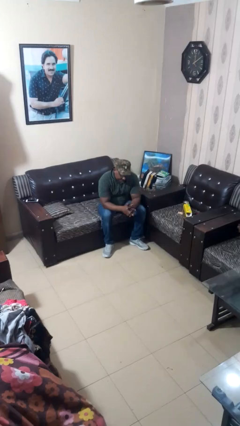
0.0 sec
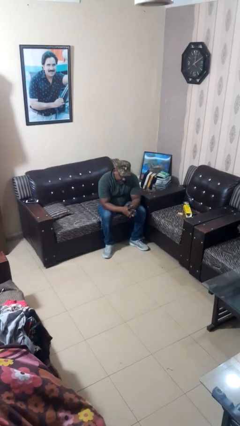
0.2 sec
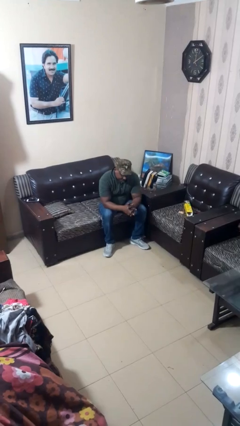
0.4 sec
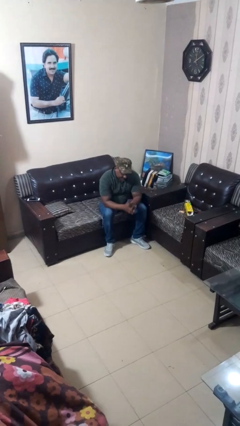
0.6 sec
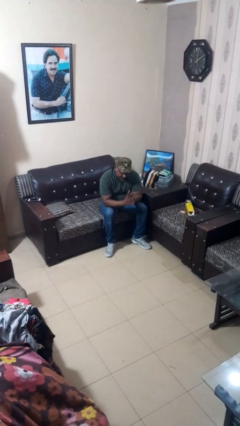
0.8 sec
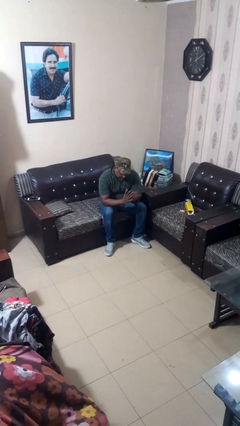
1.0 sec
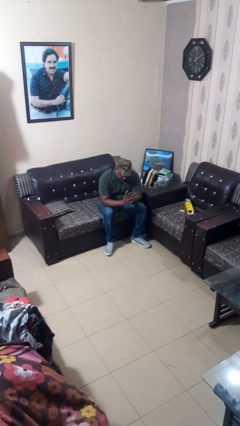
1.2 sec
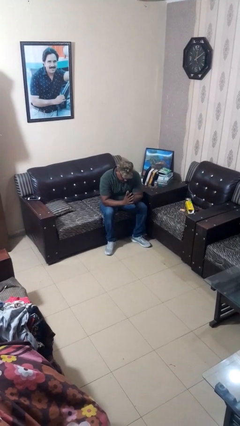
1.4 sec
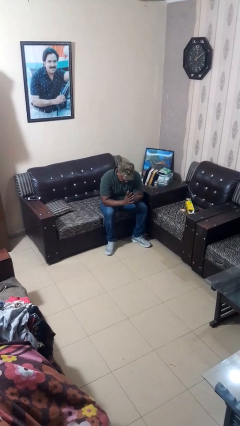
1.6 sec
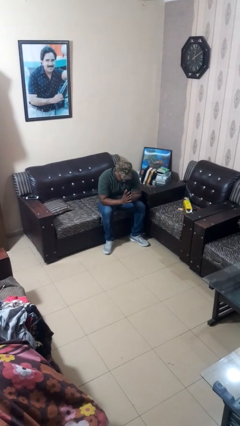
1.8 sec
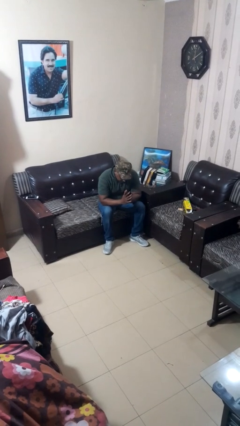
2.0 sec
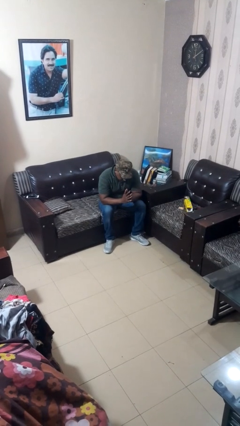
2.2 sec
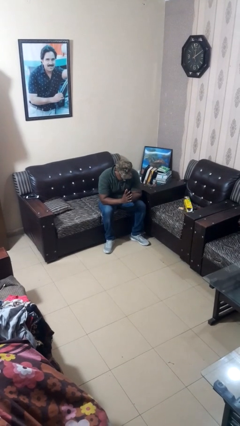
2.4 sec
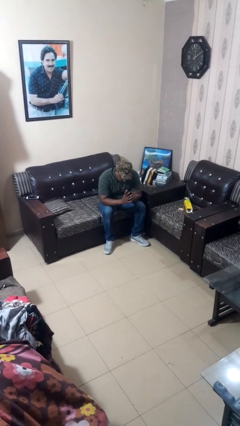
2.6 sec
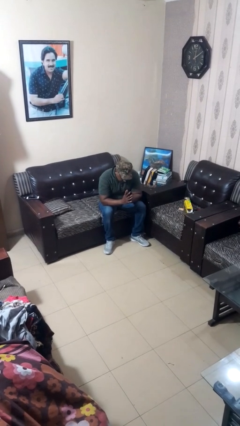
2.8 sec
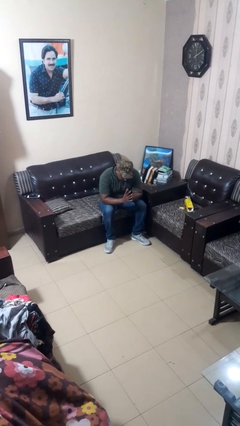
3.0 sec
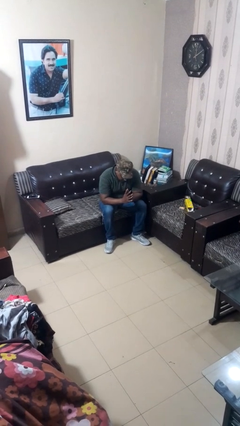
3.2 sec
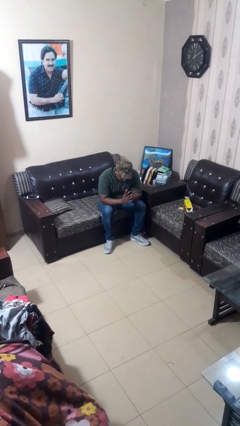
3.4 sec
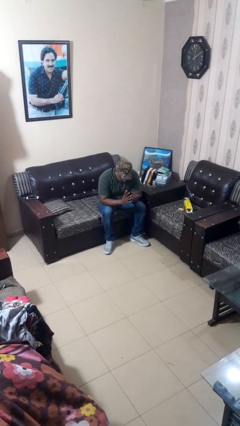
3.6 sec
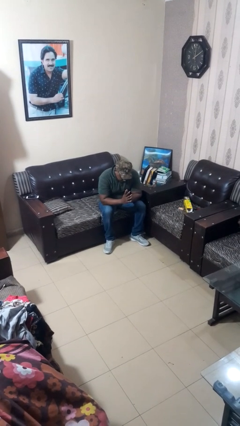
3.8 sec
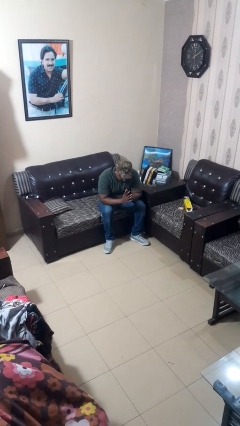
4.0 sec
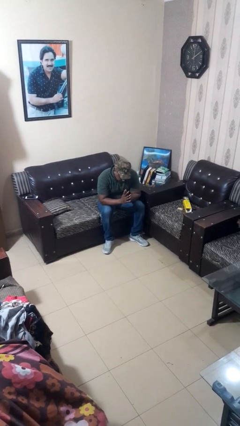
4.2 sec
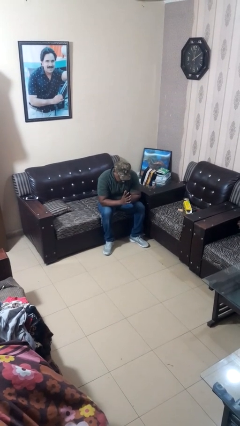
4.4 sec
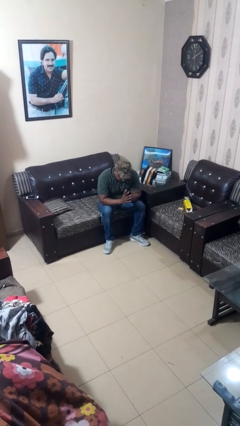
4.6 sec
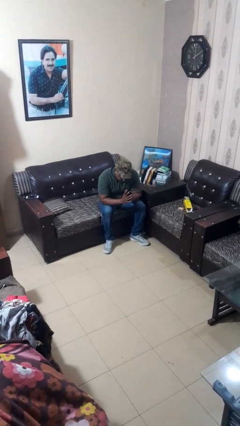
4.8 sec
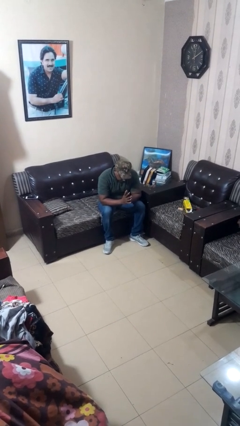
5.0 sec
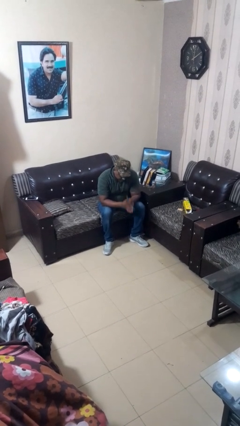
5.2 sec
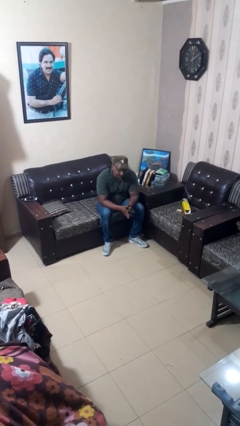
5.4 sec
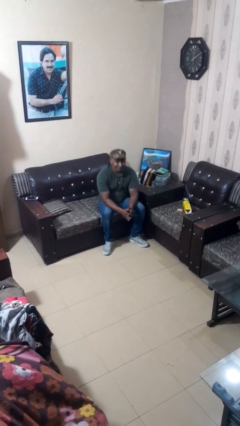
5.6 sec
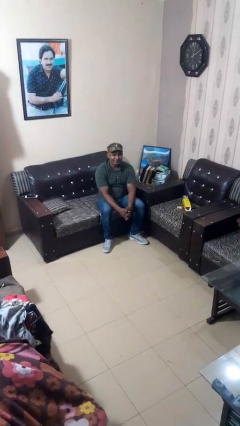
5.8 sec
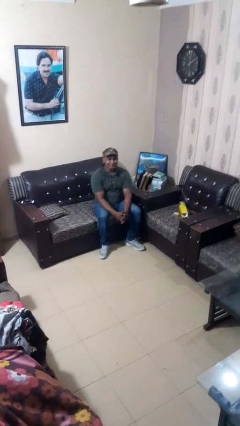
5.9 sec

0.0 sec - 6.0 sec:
person prays

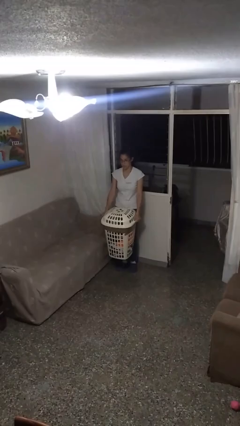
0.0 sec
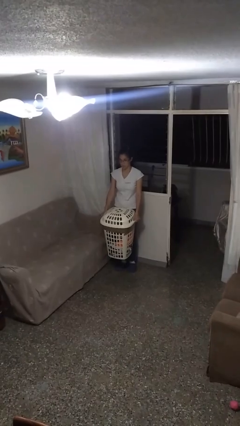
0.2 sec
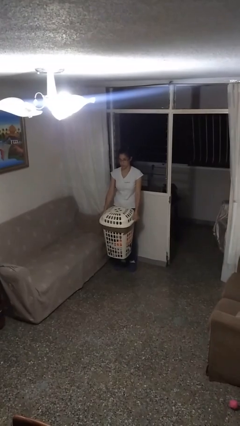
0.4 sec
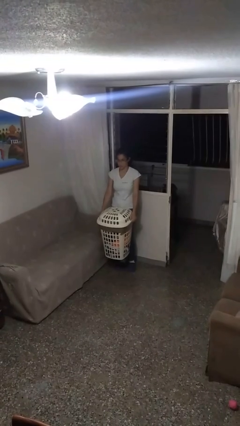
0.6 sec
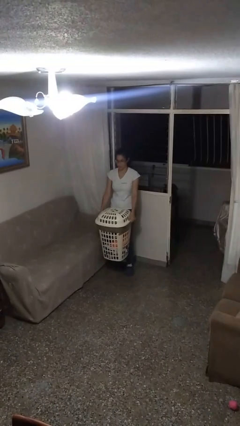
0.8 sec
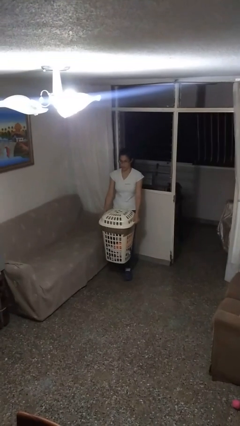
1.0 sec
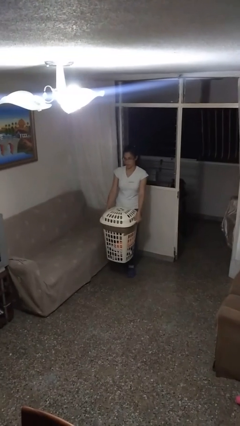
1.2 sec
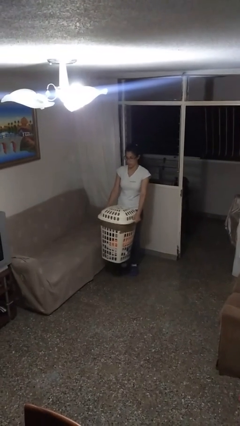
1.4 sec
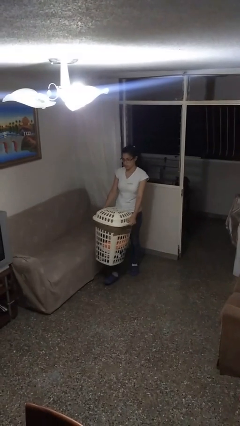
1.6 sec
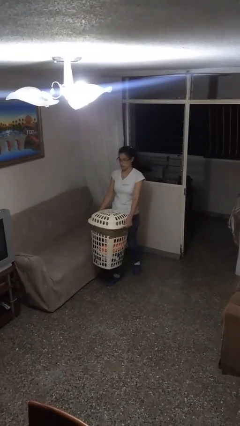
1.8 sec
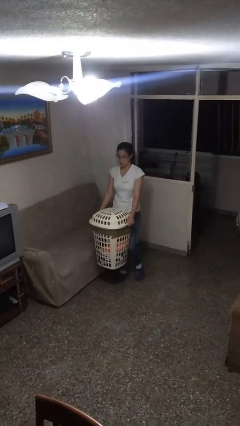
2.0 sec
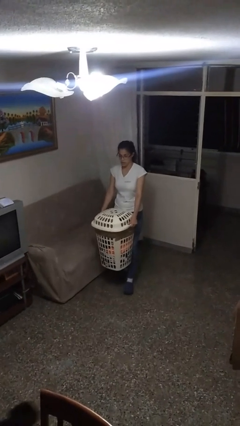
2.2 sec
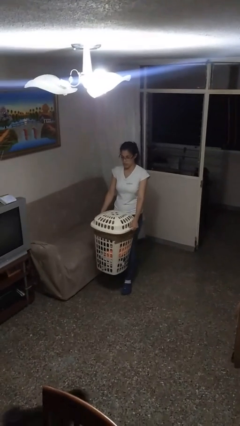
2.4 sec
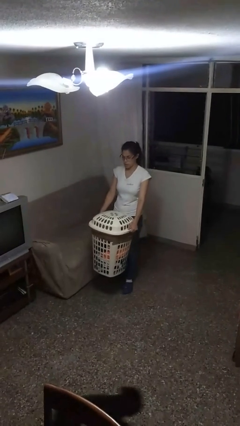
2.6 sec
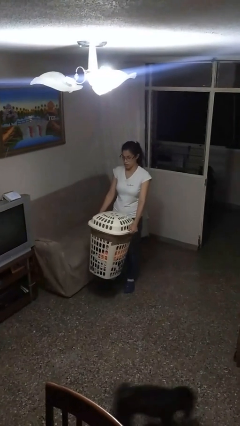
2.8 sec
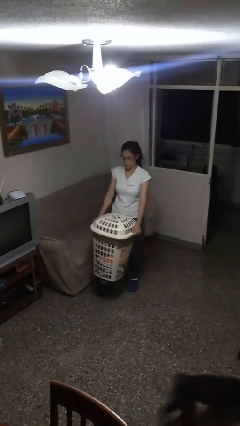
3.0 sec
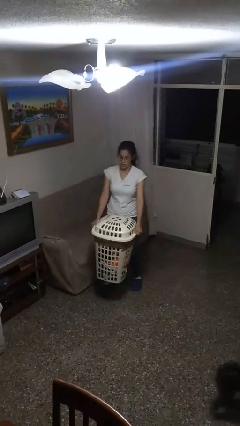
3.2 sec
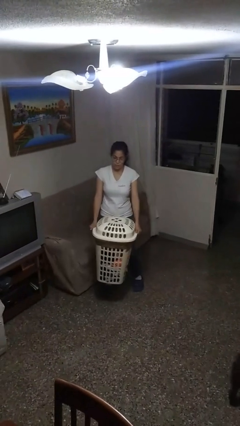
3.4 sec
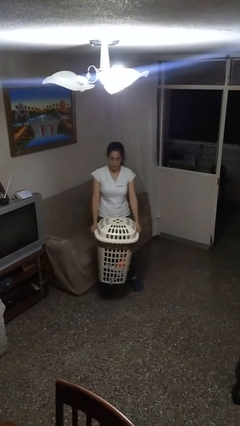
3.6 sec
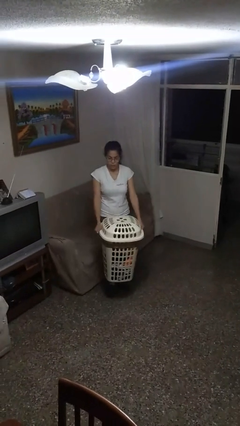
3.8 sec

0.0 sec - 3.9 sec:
person carries laundry basket

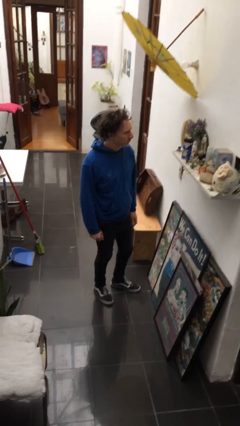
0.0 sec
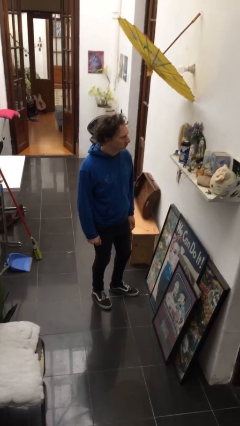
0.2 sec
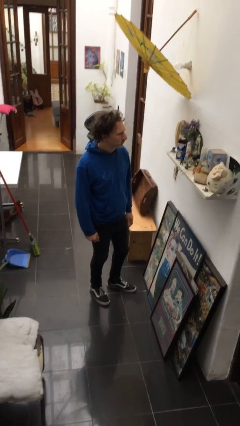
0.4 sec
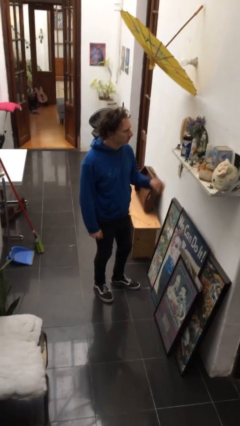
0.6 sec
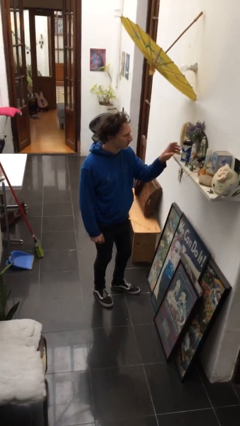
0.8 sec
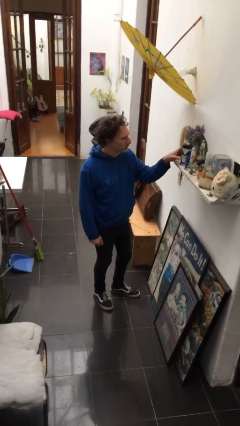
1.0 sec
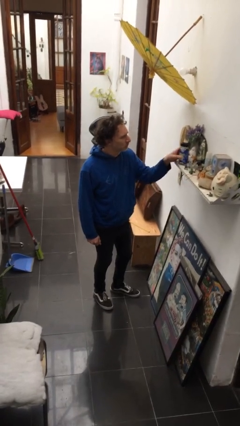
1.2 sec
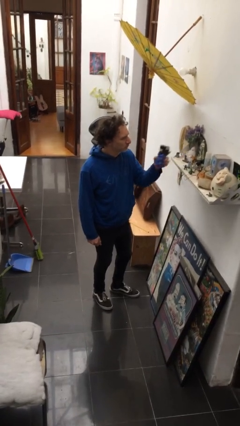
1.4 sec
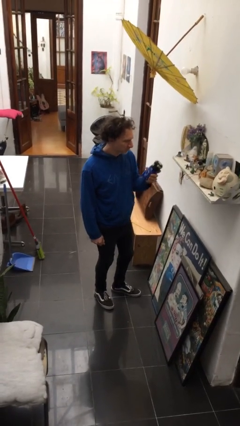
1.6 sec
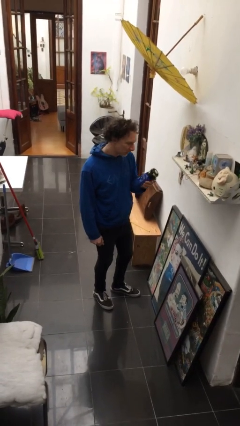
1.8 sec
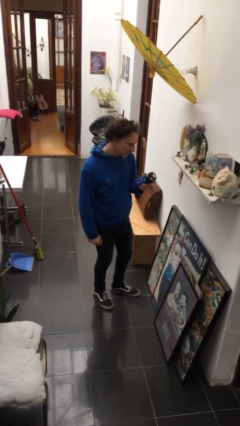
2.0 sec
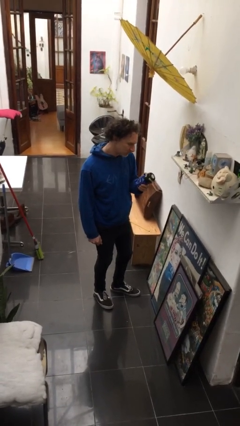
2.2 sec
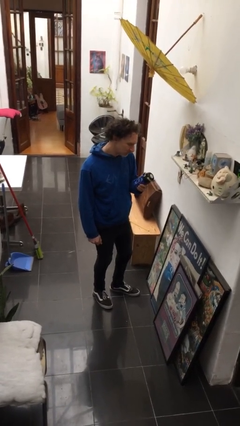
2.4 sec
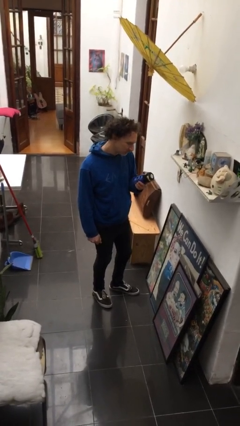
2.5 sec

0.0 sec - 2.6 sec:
person picks up object from shelf

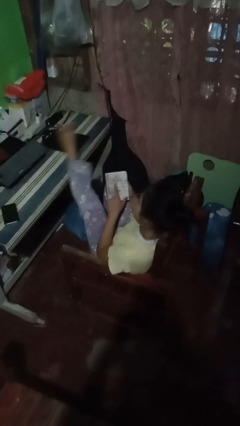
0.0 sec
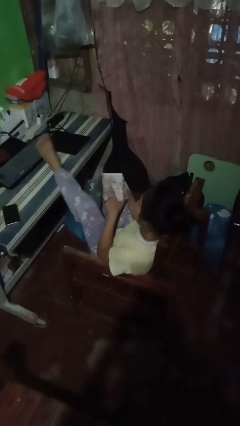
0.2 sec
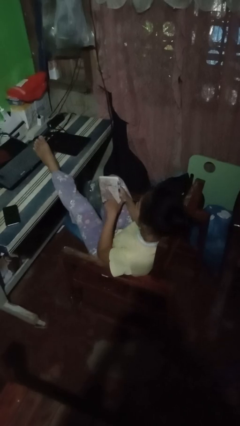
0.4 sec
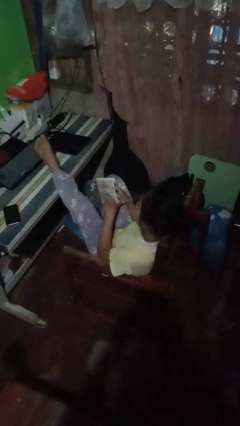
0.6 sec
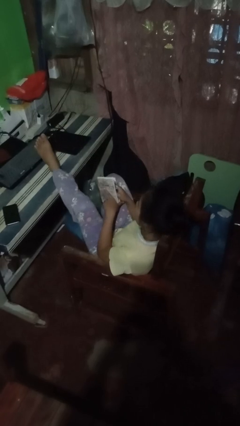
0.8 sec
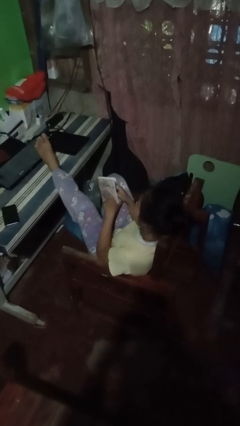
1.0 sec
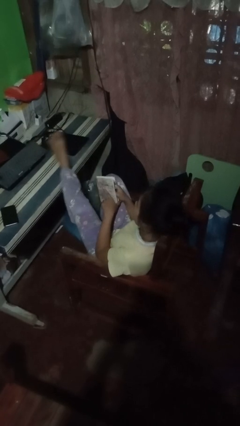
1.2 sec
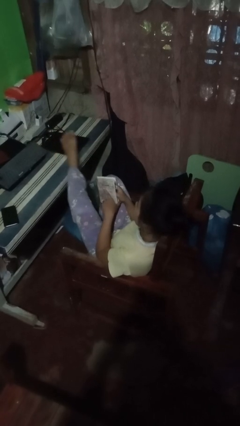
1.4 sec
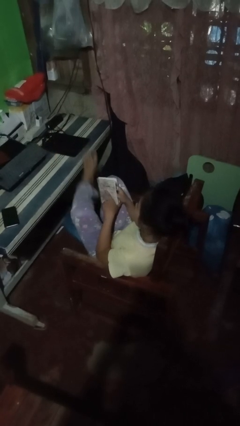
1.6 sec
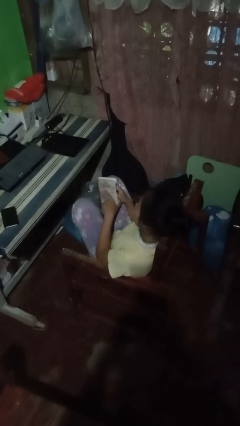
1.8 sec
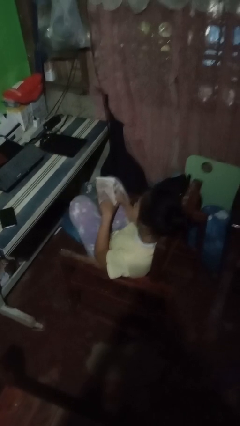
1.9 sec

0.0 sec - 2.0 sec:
person puts feet up

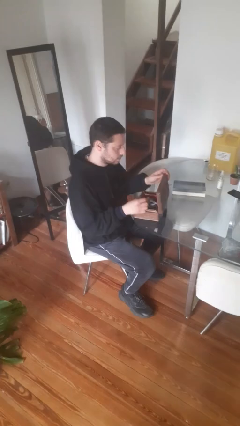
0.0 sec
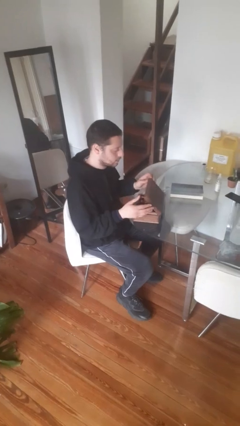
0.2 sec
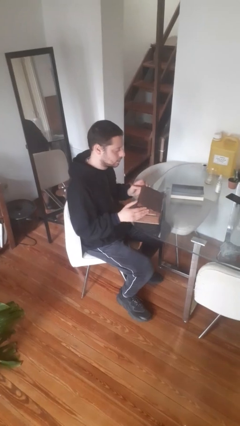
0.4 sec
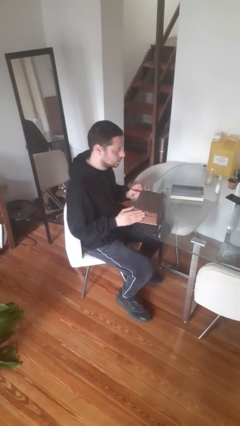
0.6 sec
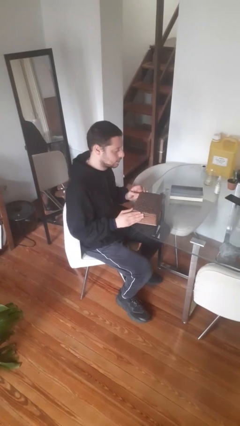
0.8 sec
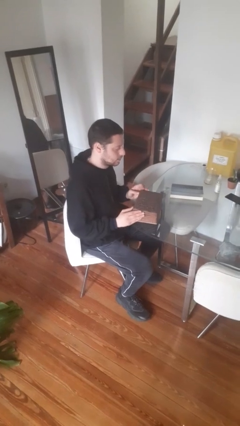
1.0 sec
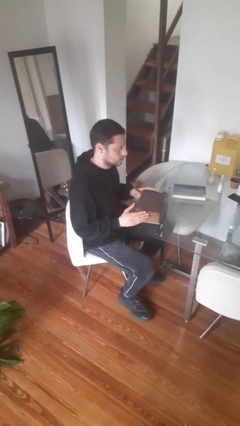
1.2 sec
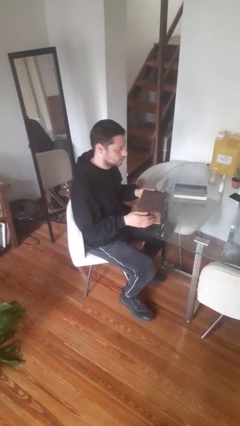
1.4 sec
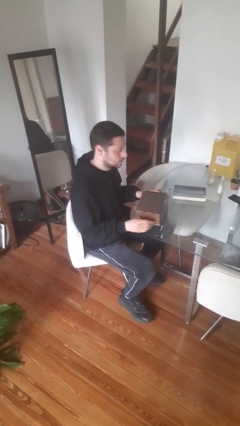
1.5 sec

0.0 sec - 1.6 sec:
person closes jewelry box

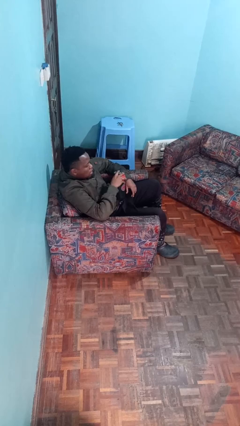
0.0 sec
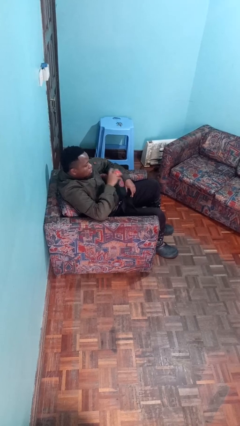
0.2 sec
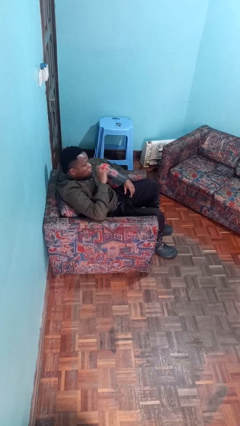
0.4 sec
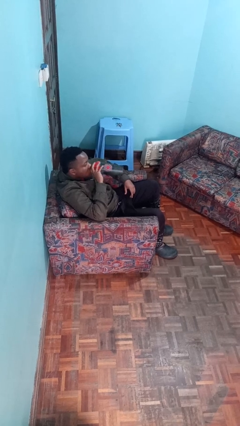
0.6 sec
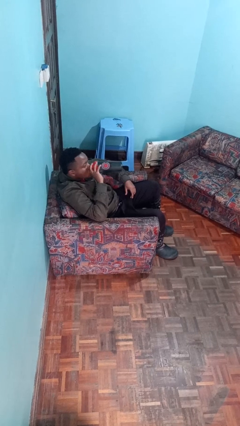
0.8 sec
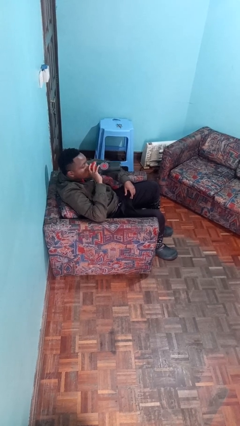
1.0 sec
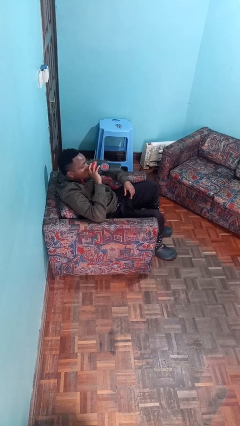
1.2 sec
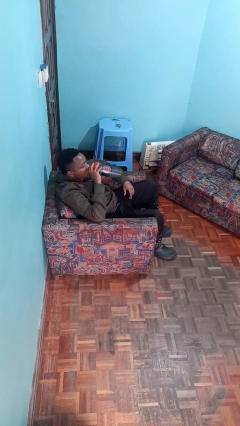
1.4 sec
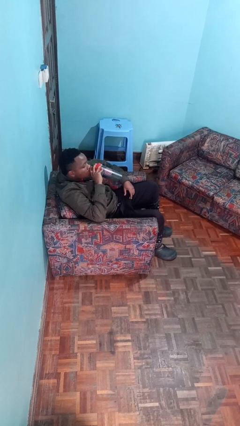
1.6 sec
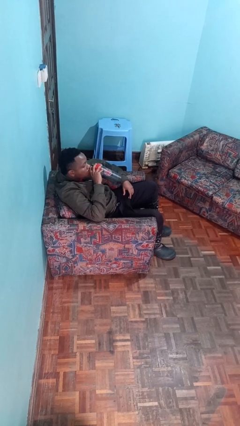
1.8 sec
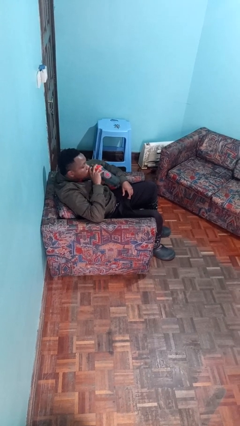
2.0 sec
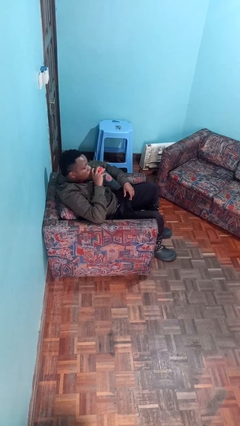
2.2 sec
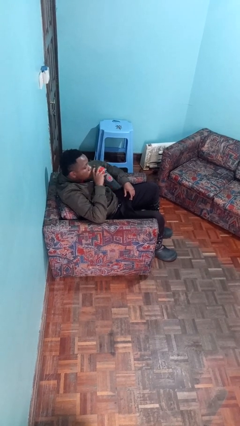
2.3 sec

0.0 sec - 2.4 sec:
person drinks from bottle
